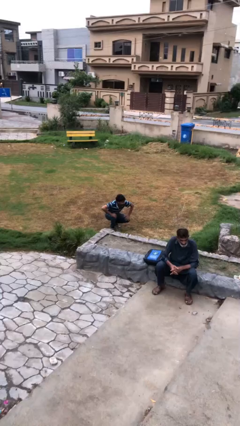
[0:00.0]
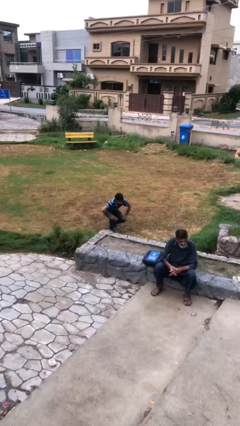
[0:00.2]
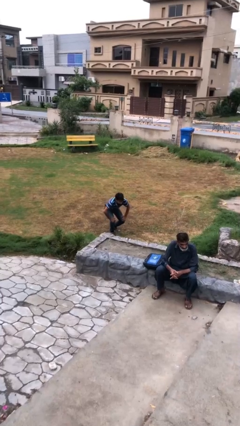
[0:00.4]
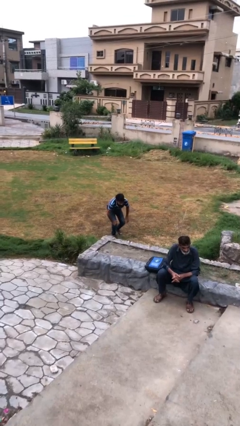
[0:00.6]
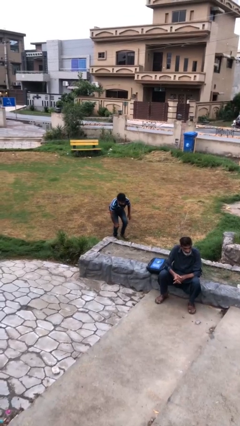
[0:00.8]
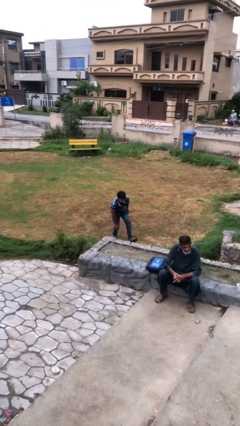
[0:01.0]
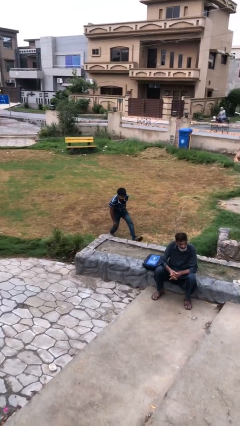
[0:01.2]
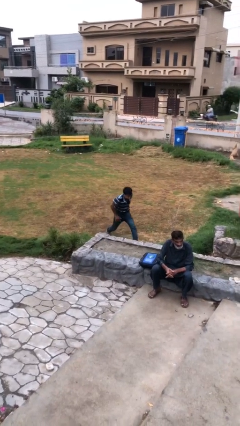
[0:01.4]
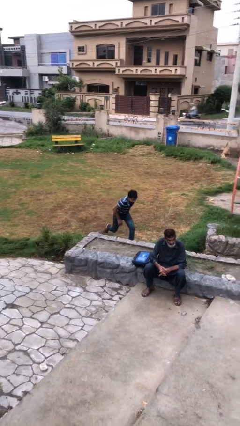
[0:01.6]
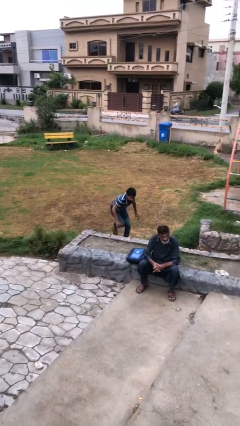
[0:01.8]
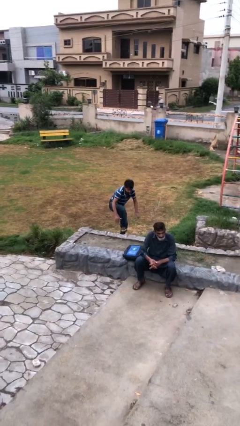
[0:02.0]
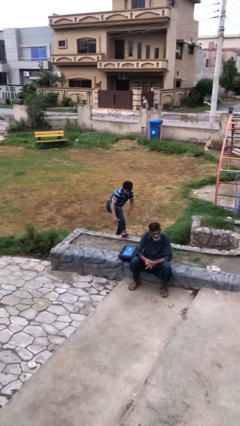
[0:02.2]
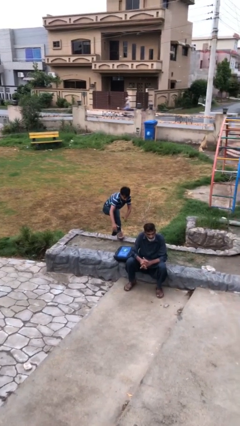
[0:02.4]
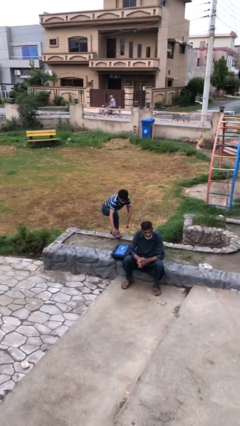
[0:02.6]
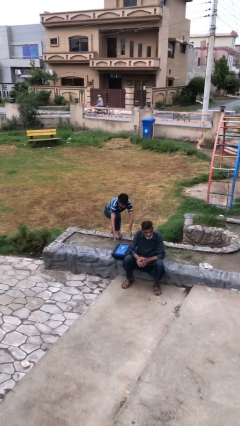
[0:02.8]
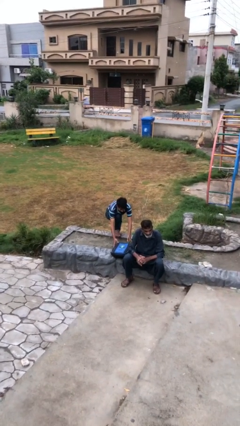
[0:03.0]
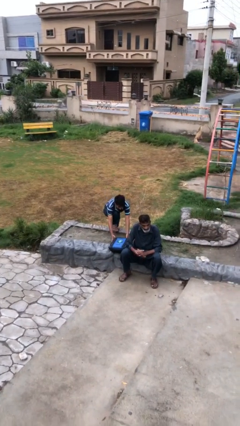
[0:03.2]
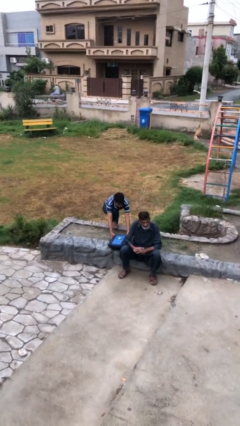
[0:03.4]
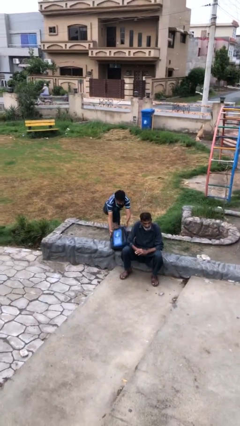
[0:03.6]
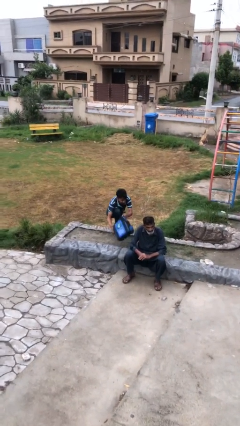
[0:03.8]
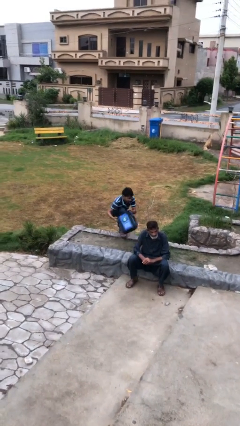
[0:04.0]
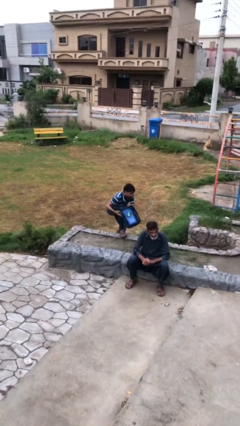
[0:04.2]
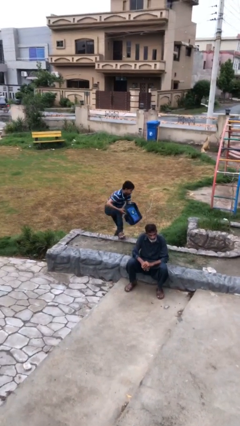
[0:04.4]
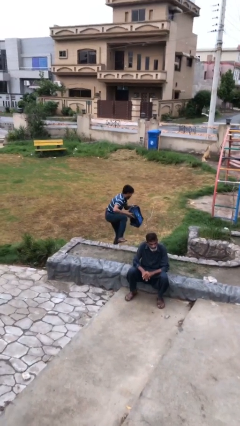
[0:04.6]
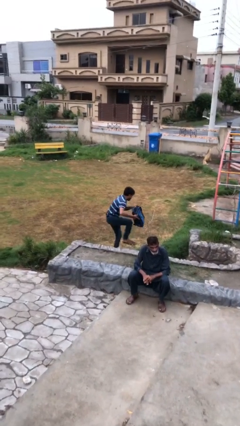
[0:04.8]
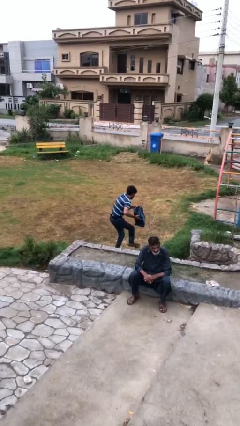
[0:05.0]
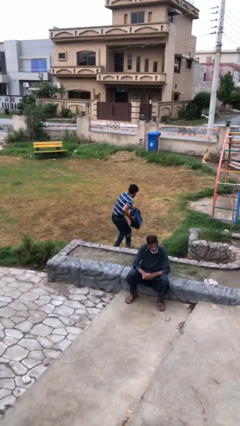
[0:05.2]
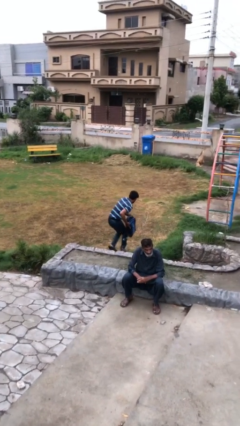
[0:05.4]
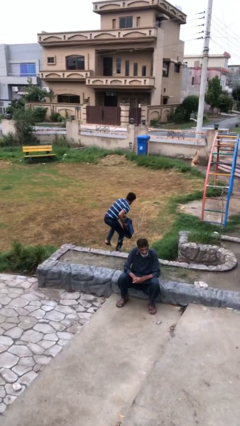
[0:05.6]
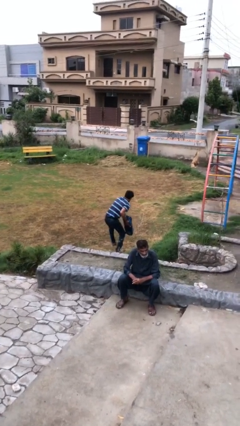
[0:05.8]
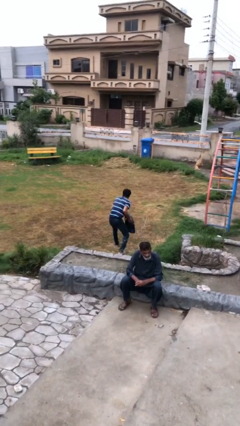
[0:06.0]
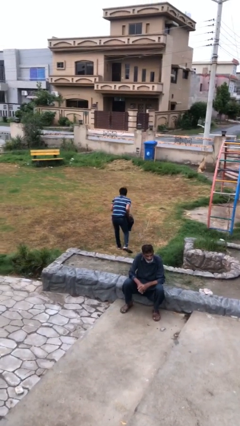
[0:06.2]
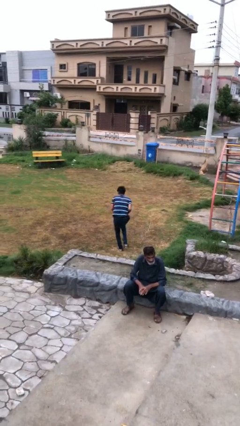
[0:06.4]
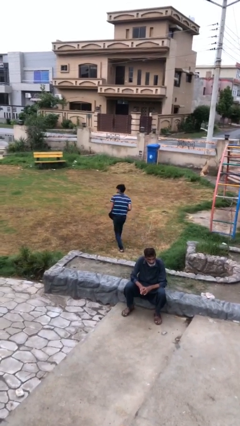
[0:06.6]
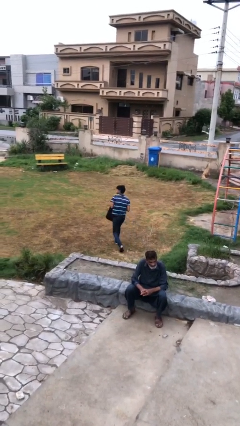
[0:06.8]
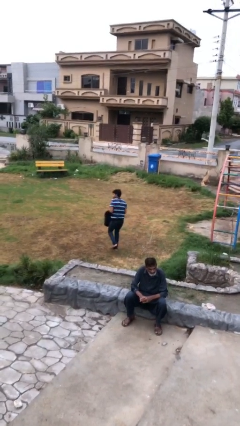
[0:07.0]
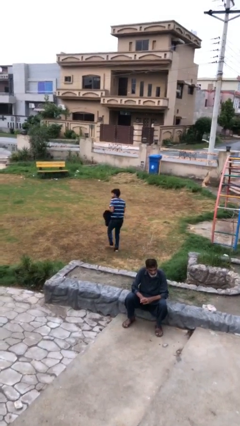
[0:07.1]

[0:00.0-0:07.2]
person steals object from person

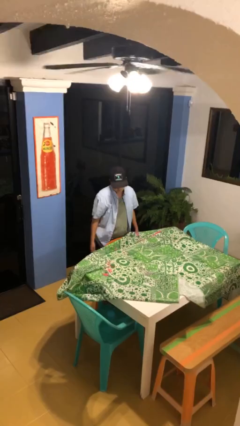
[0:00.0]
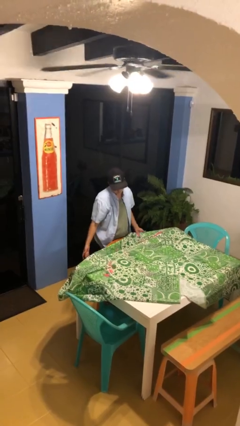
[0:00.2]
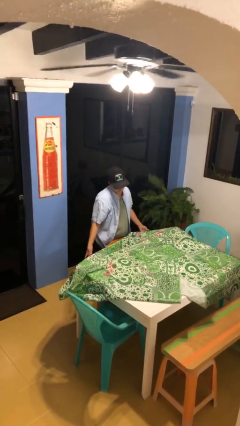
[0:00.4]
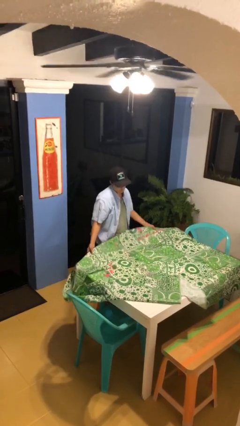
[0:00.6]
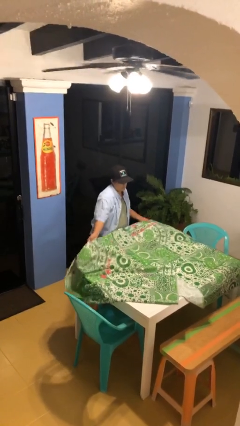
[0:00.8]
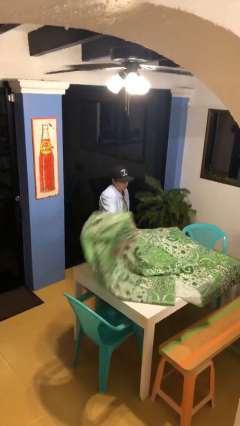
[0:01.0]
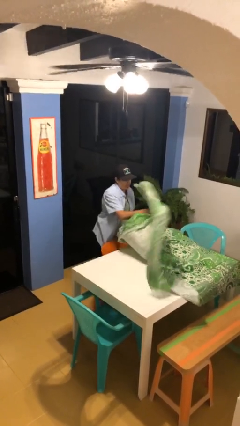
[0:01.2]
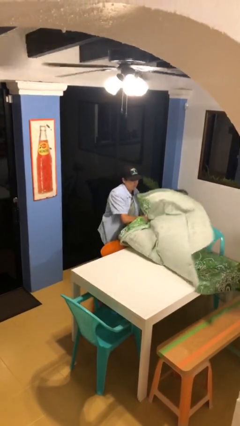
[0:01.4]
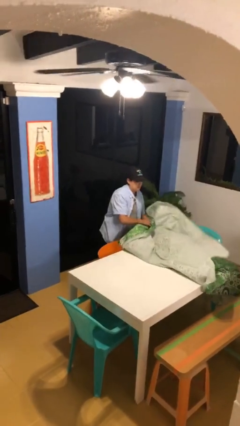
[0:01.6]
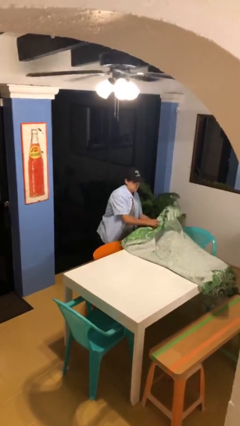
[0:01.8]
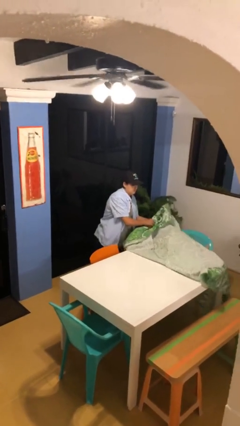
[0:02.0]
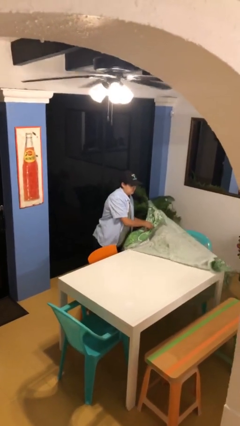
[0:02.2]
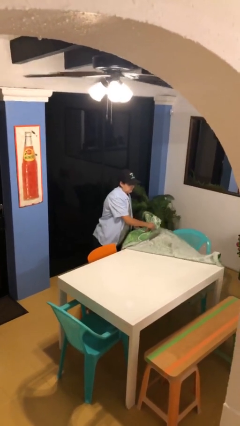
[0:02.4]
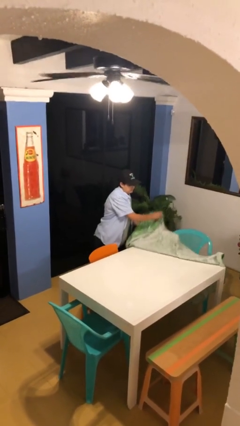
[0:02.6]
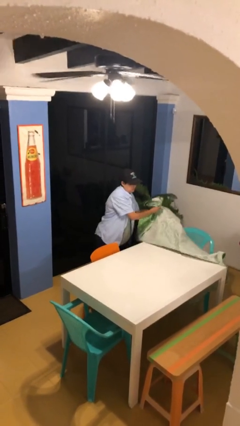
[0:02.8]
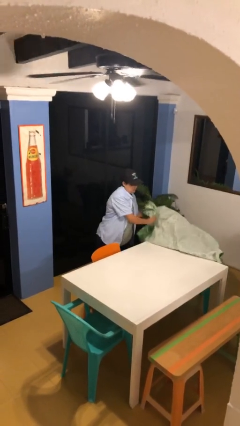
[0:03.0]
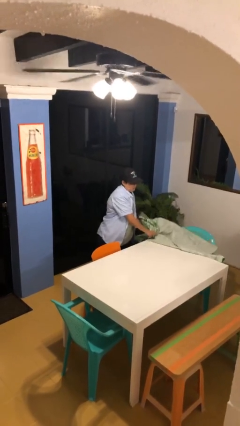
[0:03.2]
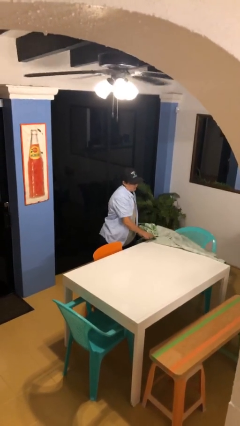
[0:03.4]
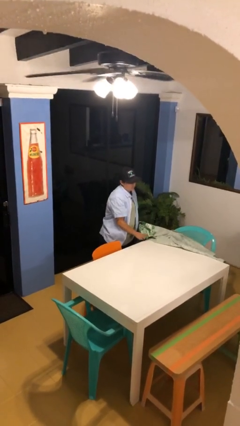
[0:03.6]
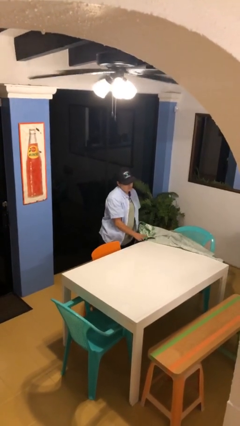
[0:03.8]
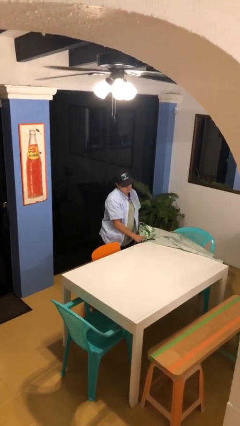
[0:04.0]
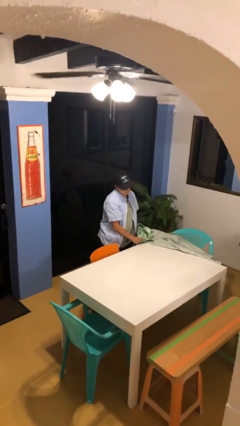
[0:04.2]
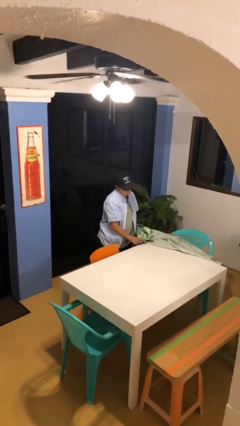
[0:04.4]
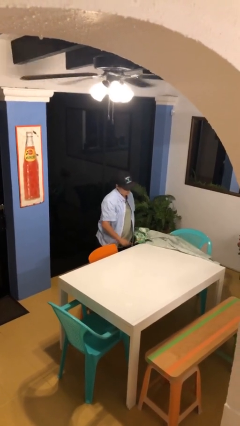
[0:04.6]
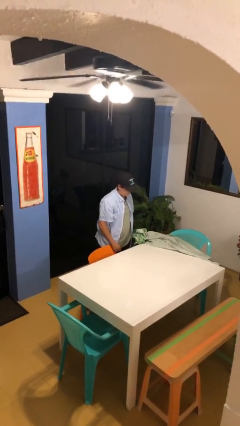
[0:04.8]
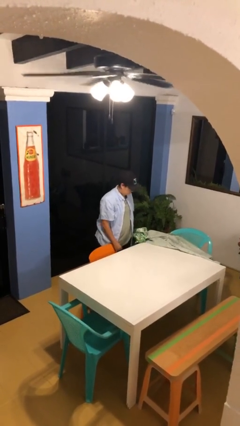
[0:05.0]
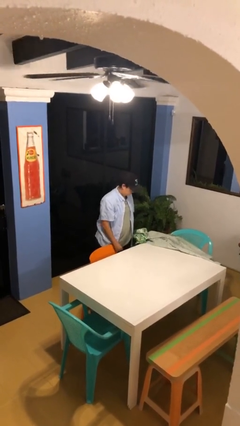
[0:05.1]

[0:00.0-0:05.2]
person folds tablecloth

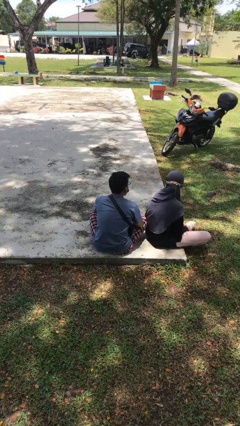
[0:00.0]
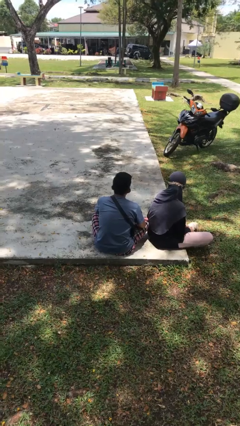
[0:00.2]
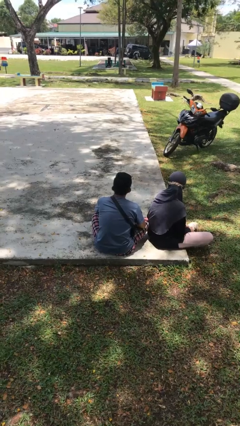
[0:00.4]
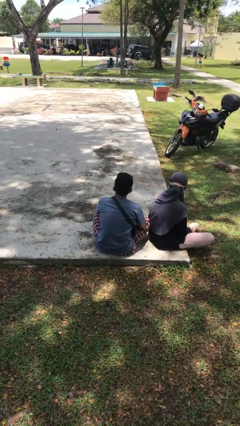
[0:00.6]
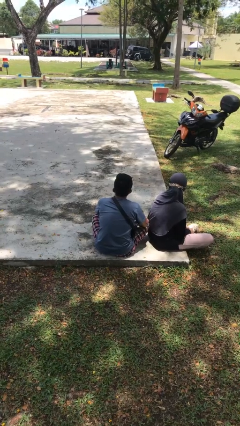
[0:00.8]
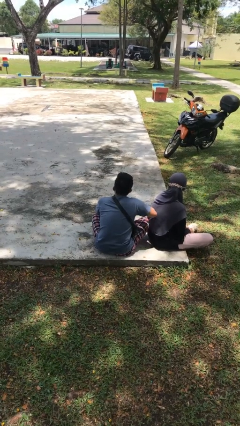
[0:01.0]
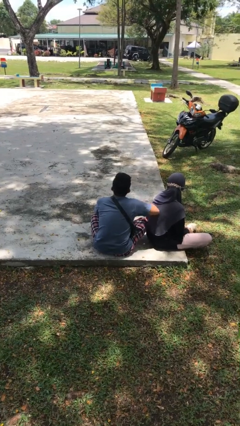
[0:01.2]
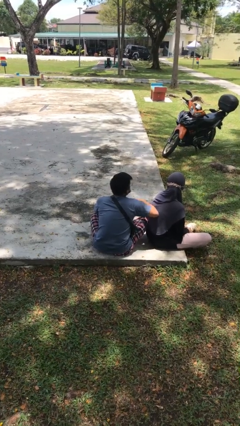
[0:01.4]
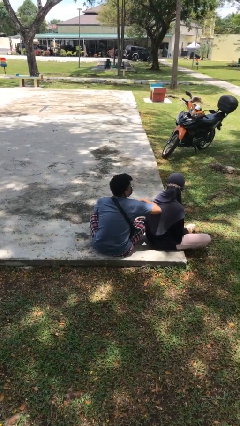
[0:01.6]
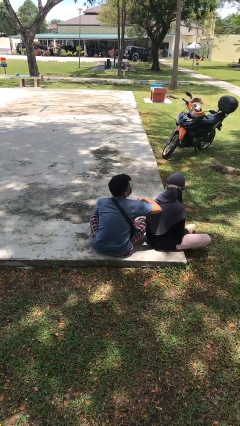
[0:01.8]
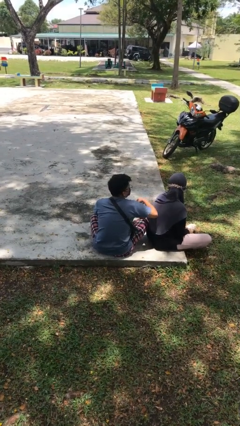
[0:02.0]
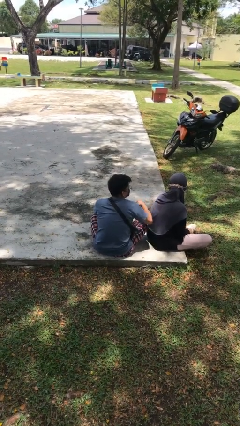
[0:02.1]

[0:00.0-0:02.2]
person nudges person with elbow

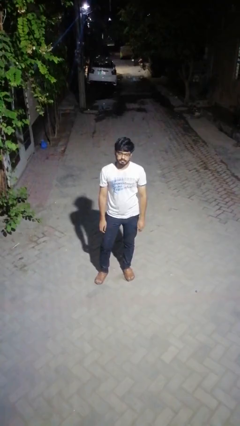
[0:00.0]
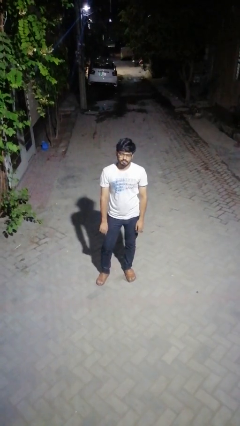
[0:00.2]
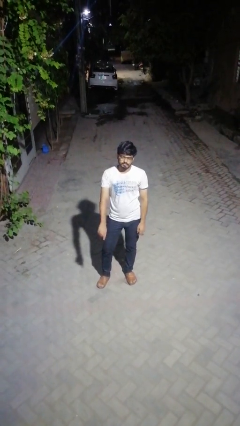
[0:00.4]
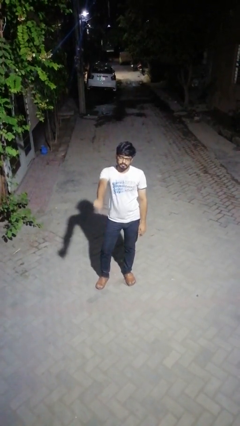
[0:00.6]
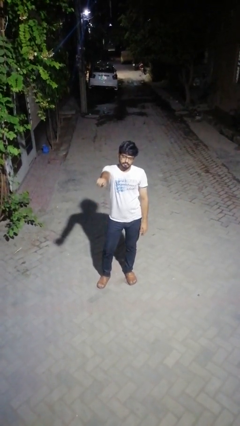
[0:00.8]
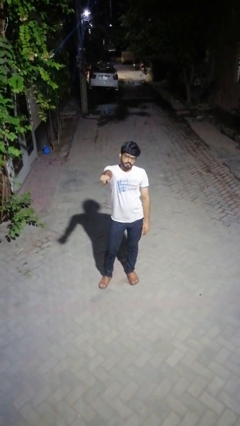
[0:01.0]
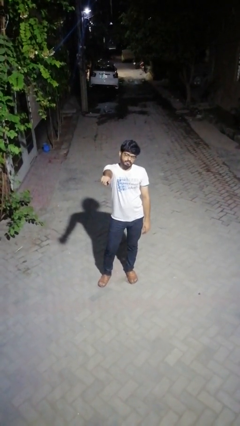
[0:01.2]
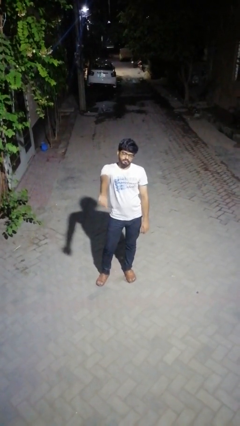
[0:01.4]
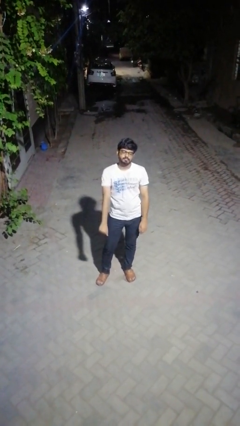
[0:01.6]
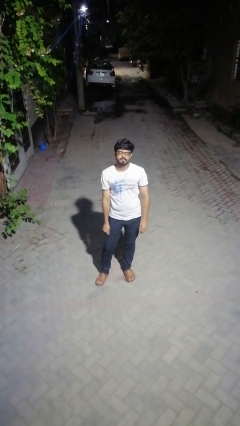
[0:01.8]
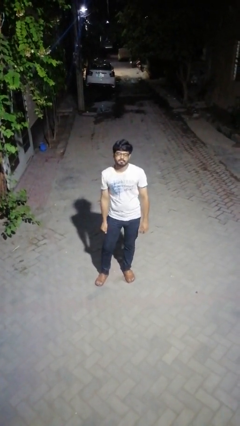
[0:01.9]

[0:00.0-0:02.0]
person points at person

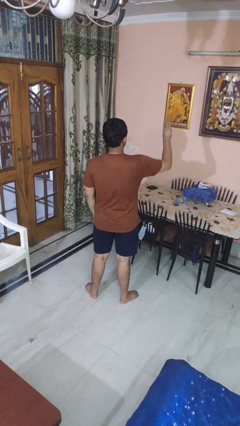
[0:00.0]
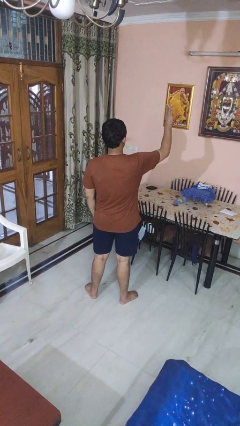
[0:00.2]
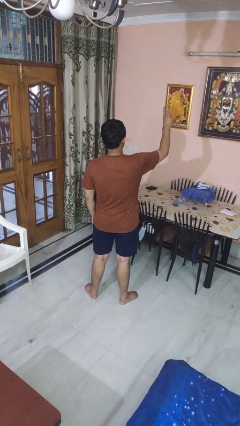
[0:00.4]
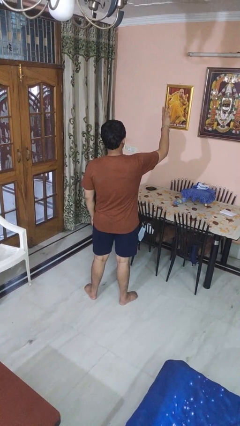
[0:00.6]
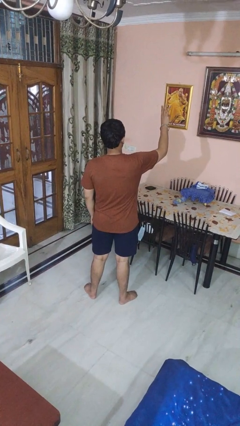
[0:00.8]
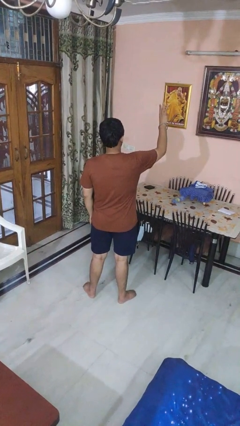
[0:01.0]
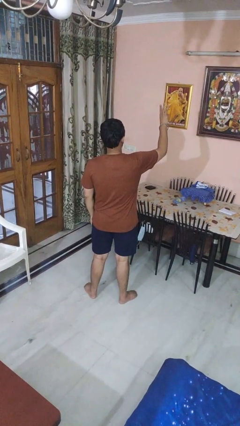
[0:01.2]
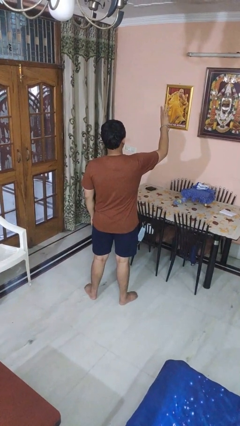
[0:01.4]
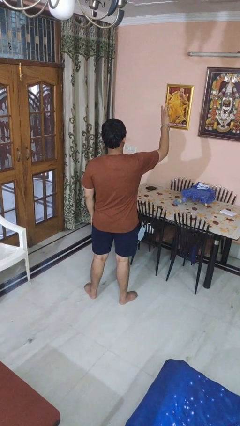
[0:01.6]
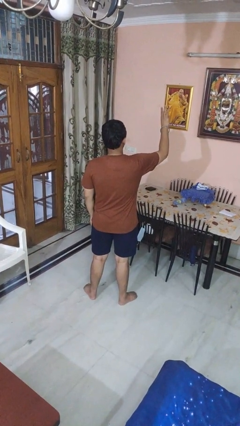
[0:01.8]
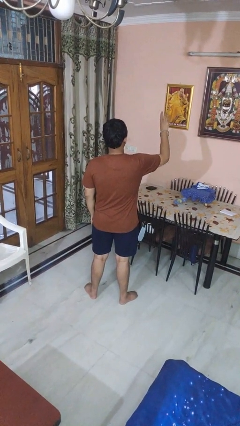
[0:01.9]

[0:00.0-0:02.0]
person gestures number three
